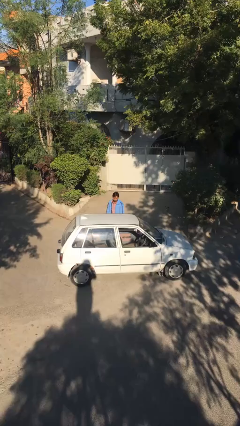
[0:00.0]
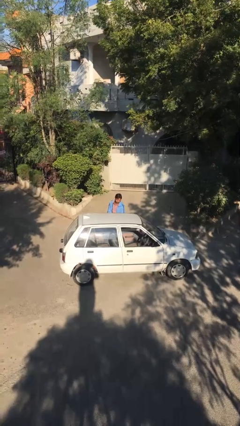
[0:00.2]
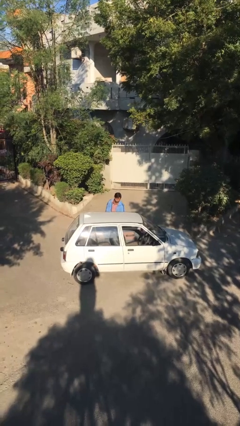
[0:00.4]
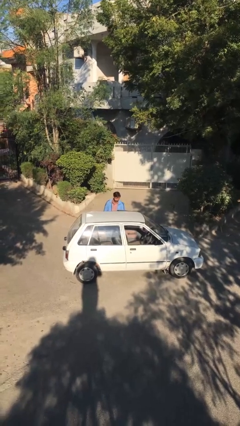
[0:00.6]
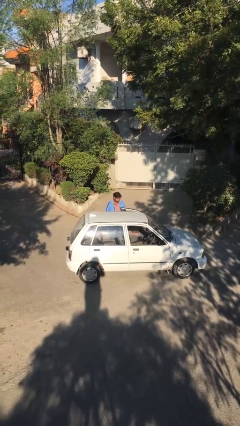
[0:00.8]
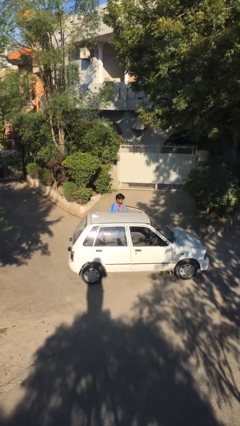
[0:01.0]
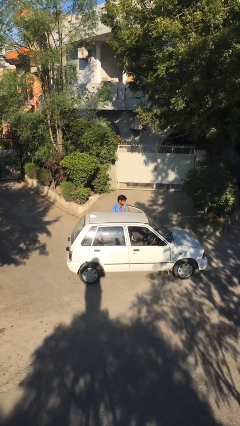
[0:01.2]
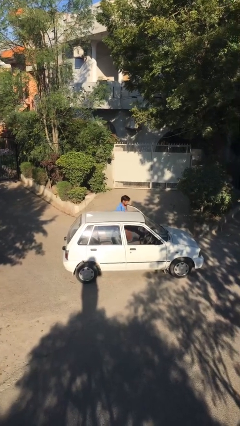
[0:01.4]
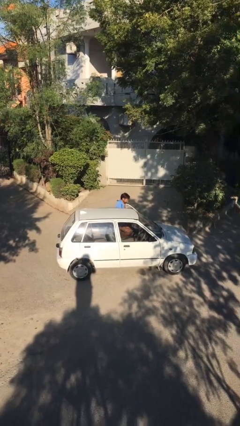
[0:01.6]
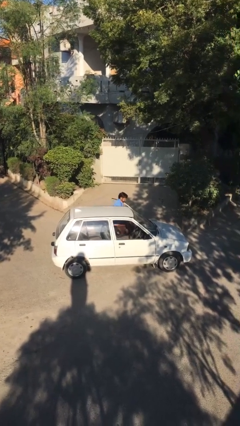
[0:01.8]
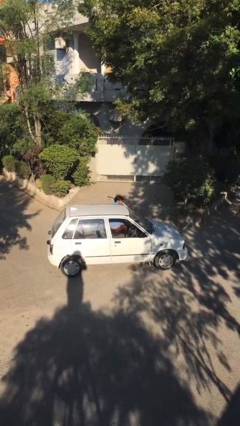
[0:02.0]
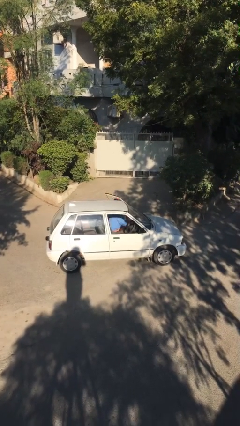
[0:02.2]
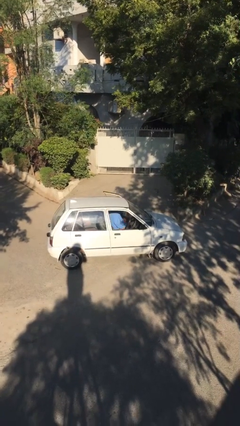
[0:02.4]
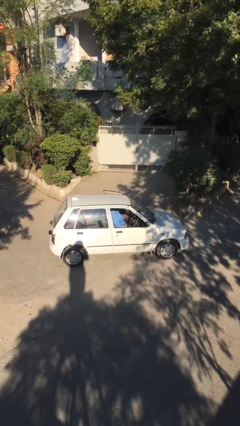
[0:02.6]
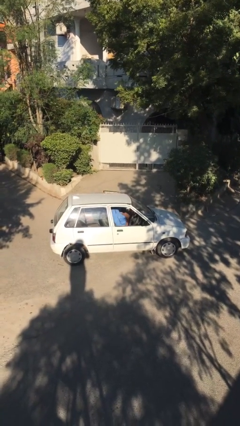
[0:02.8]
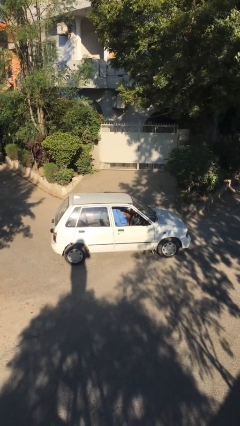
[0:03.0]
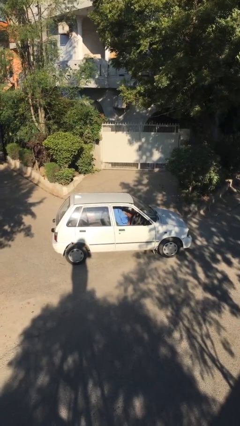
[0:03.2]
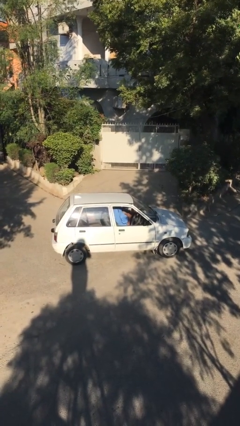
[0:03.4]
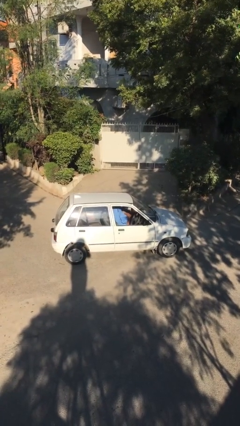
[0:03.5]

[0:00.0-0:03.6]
person enters car

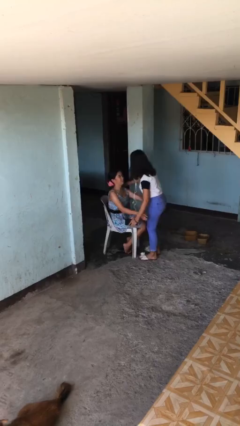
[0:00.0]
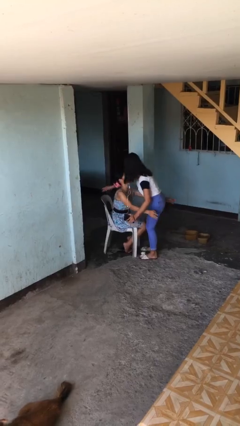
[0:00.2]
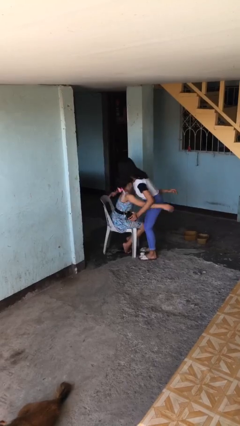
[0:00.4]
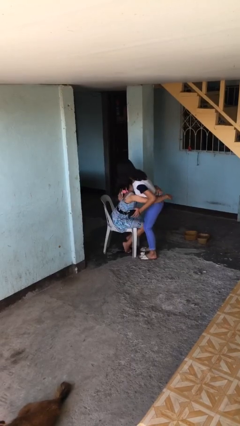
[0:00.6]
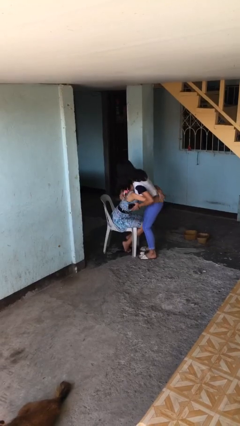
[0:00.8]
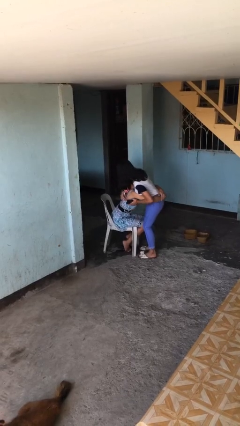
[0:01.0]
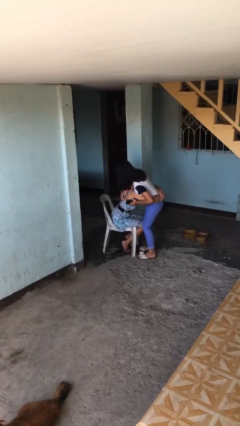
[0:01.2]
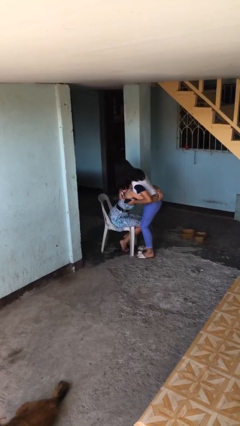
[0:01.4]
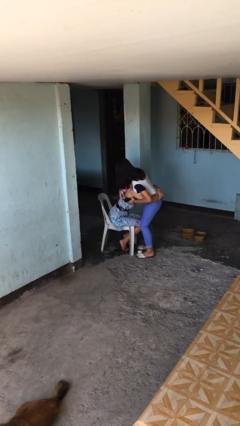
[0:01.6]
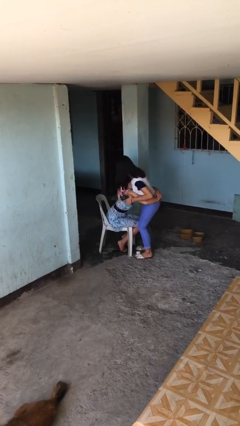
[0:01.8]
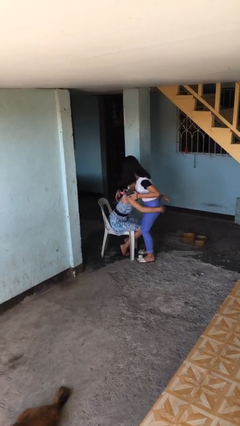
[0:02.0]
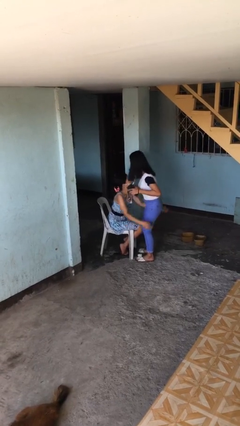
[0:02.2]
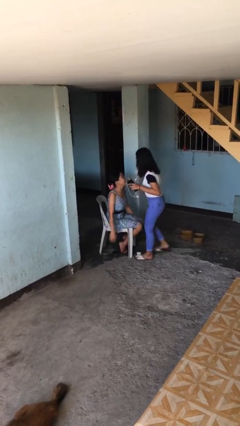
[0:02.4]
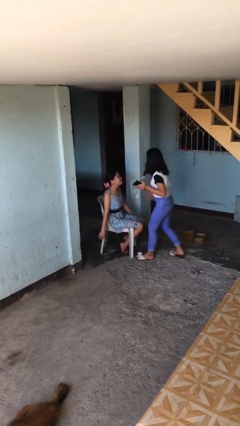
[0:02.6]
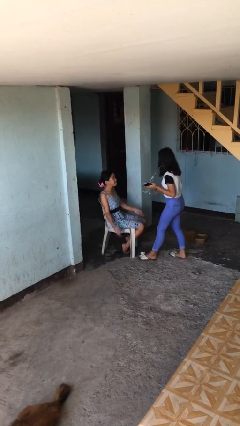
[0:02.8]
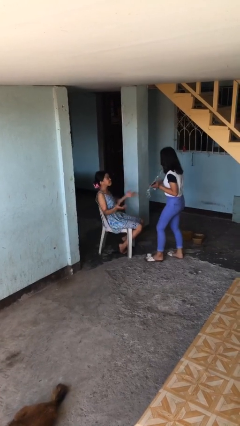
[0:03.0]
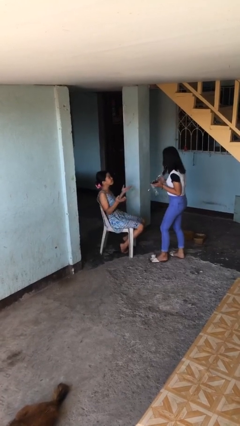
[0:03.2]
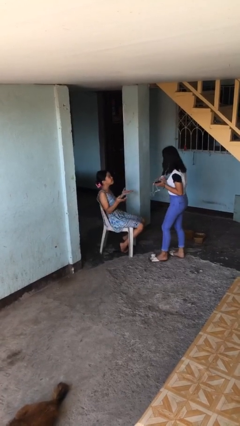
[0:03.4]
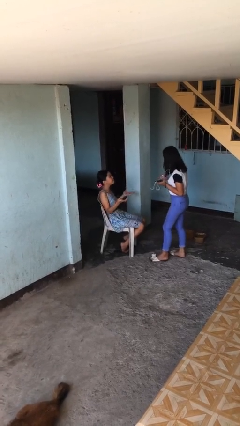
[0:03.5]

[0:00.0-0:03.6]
person embraces person

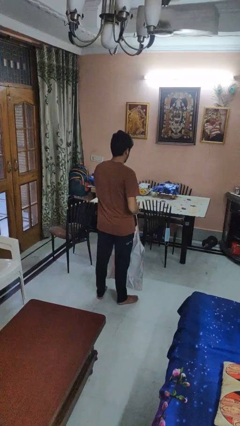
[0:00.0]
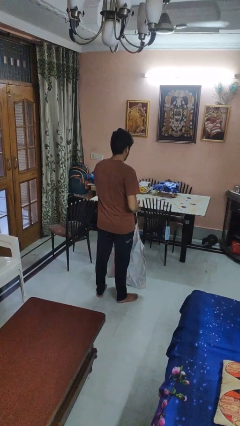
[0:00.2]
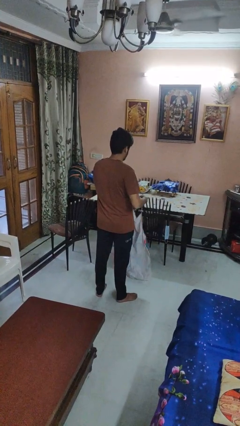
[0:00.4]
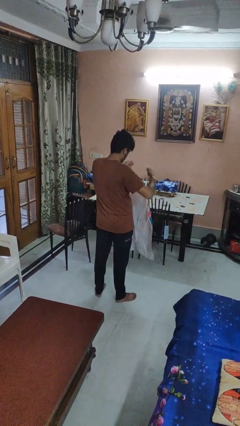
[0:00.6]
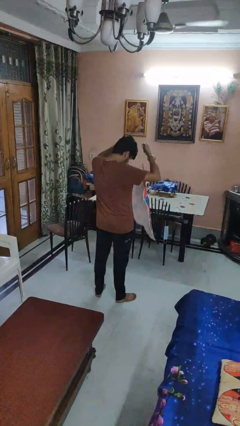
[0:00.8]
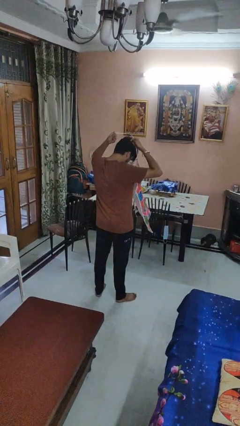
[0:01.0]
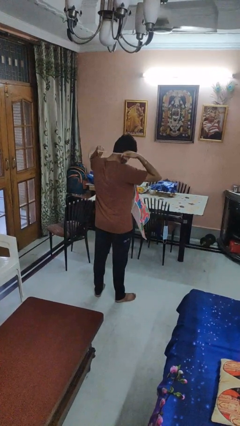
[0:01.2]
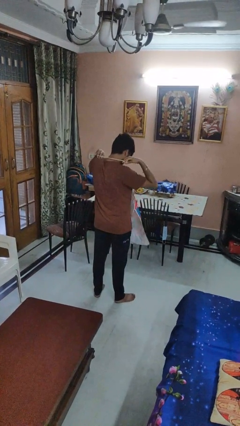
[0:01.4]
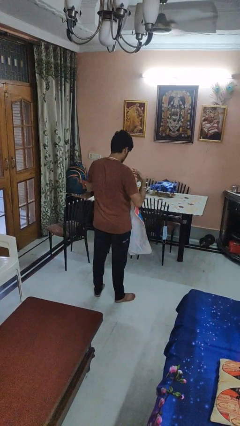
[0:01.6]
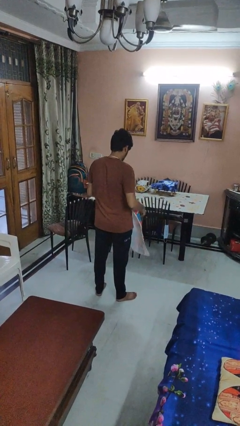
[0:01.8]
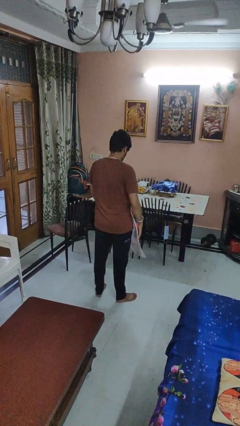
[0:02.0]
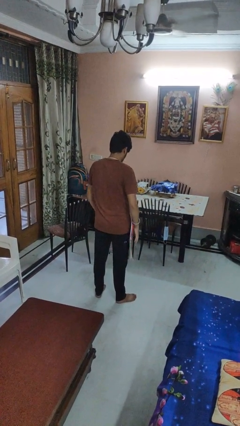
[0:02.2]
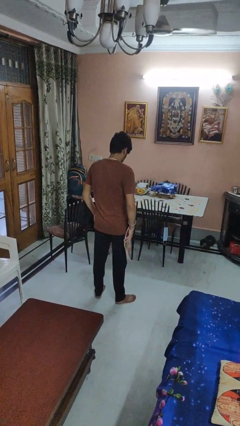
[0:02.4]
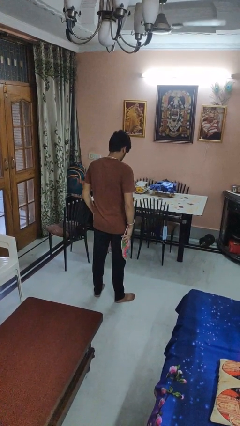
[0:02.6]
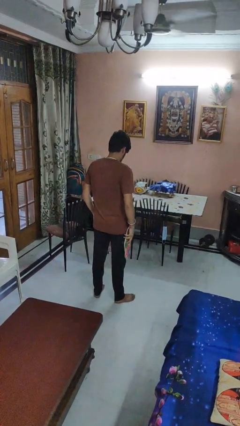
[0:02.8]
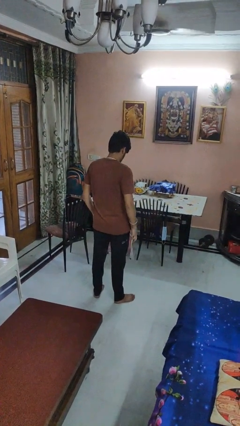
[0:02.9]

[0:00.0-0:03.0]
person puts on apron

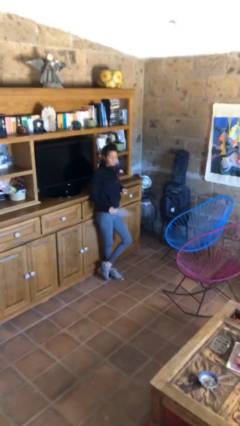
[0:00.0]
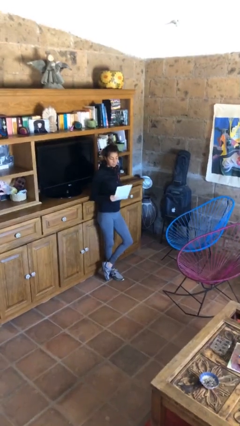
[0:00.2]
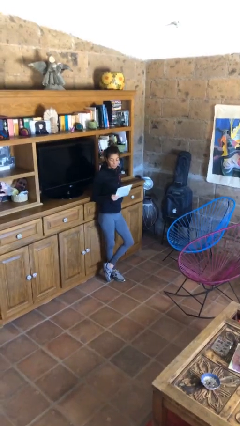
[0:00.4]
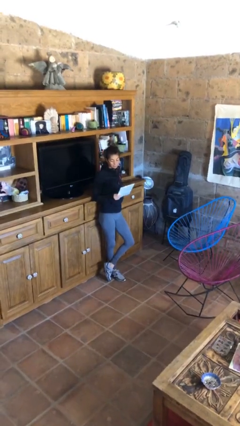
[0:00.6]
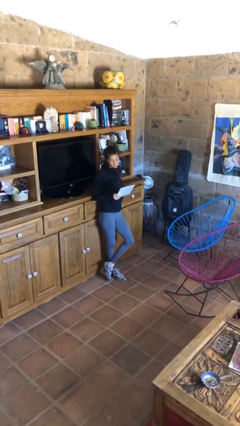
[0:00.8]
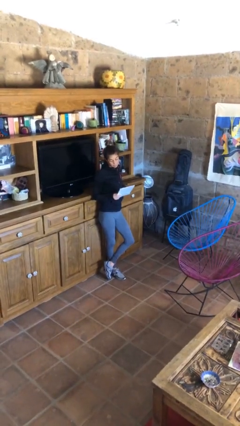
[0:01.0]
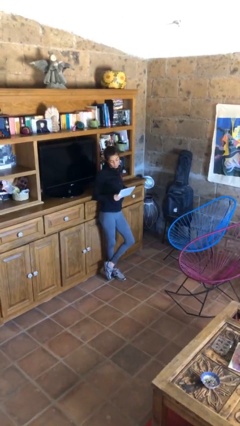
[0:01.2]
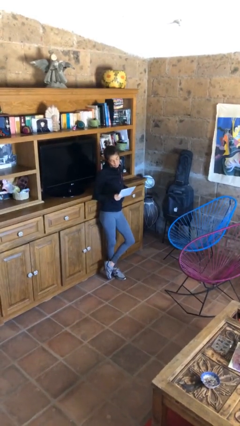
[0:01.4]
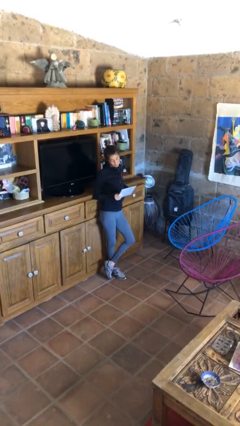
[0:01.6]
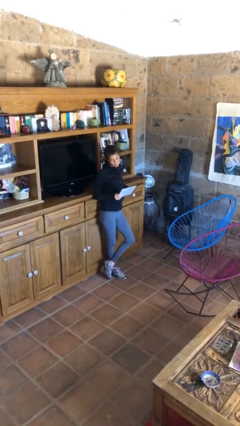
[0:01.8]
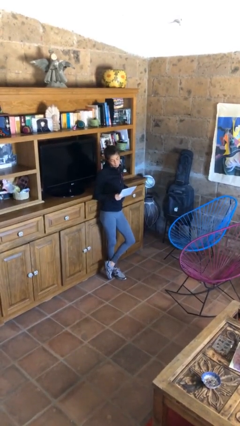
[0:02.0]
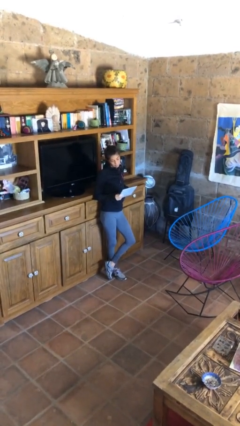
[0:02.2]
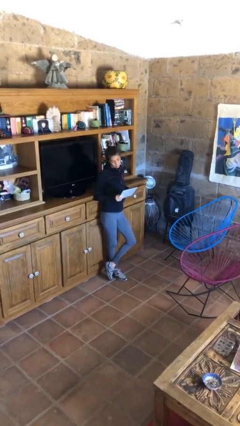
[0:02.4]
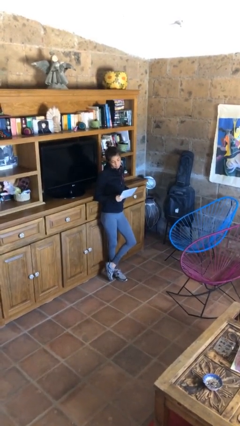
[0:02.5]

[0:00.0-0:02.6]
person reads document

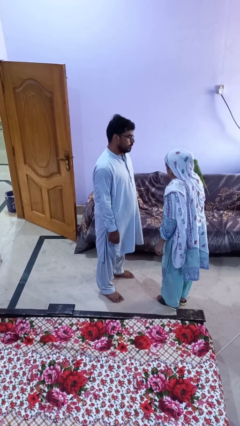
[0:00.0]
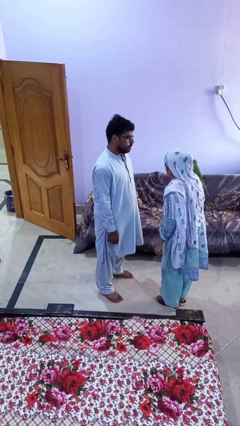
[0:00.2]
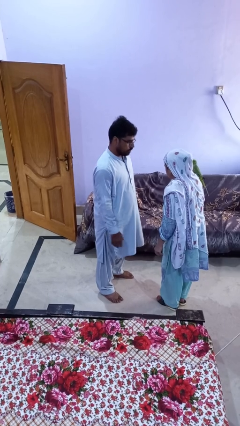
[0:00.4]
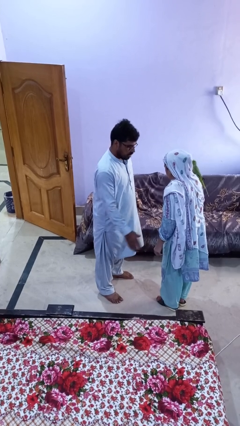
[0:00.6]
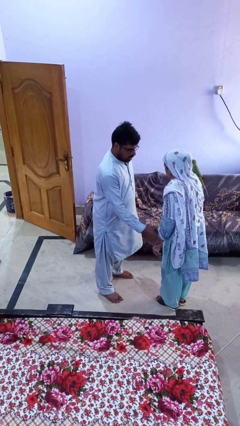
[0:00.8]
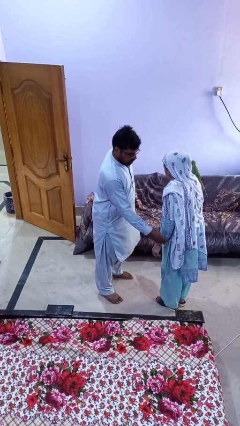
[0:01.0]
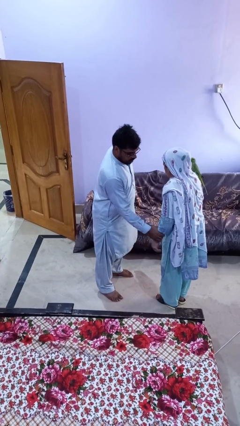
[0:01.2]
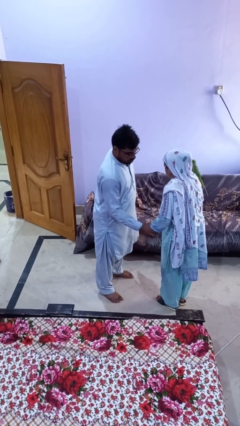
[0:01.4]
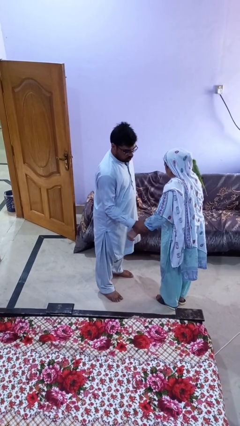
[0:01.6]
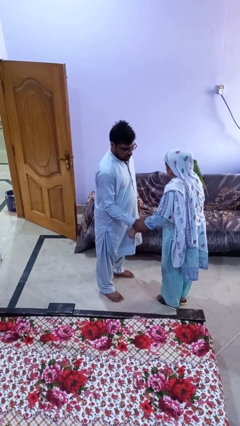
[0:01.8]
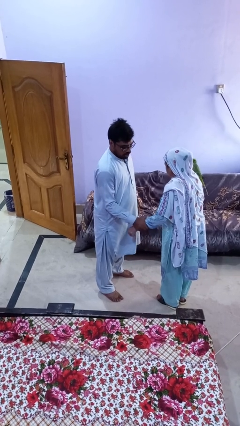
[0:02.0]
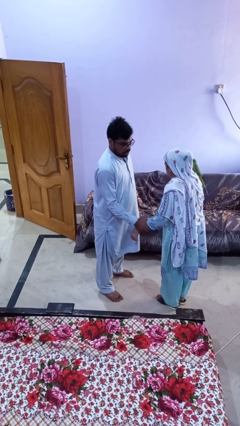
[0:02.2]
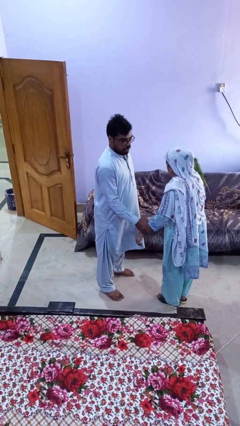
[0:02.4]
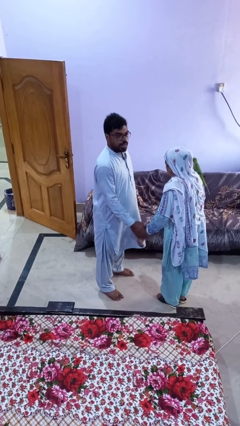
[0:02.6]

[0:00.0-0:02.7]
person grabs person by forearm

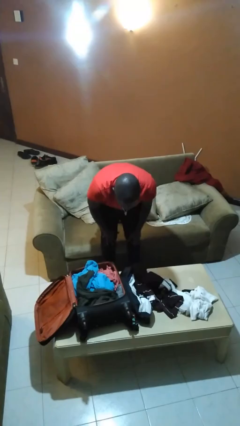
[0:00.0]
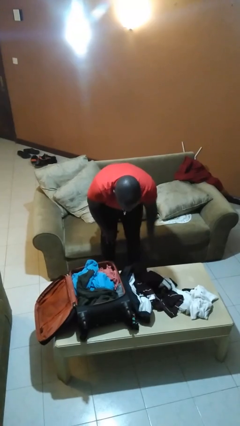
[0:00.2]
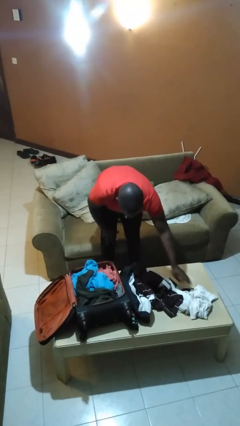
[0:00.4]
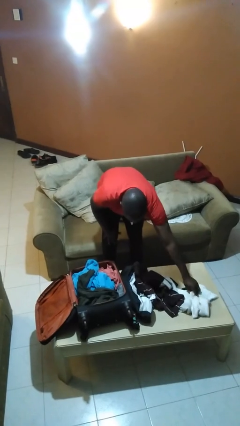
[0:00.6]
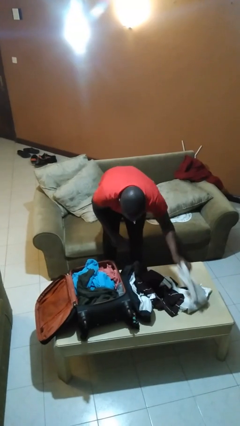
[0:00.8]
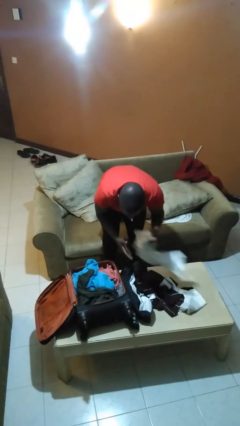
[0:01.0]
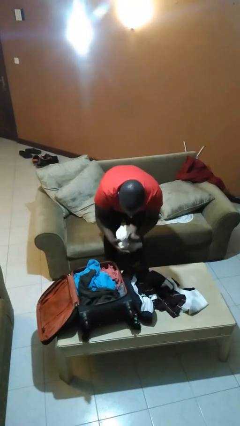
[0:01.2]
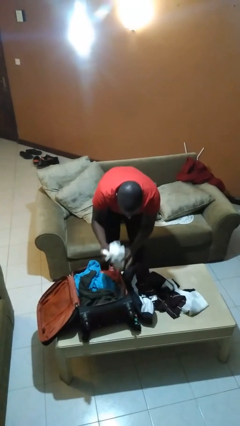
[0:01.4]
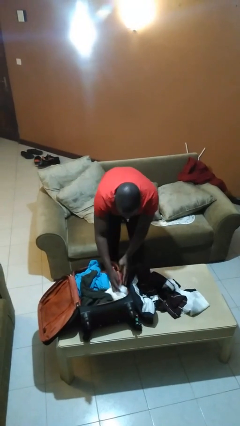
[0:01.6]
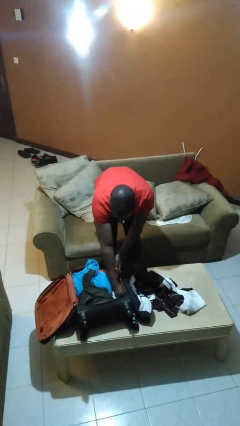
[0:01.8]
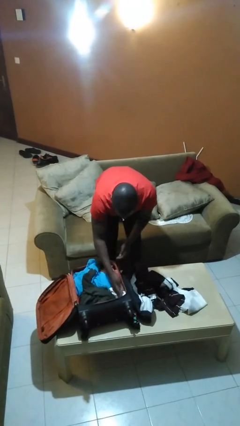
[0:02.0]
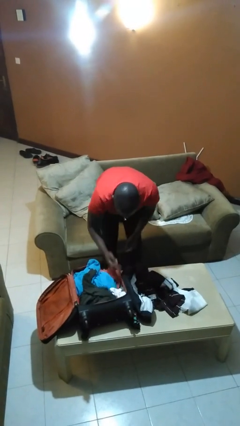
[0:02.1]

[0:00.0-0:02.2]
person loads clothes into suitcase
